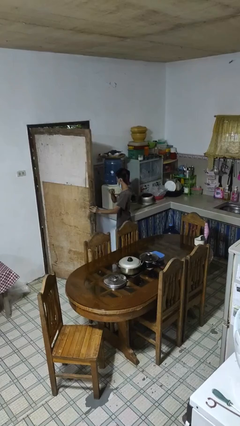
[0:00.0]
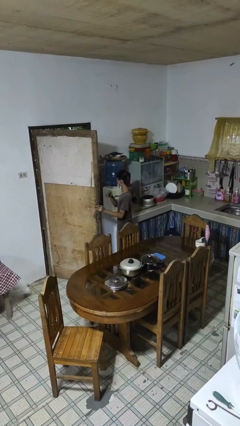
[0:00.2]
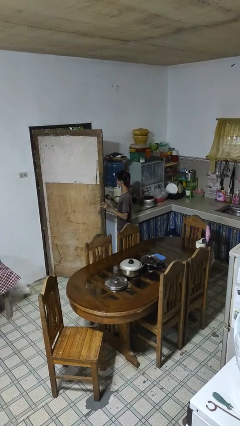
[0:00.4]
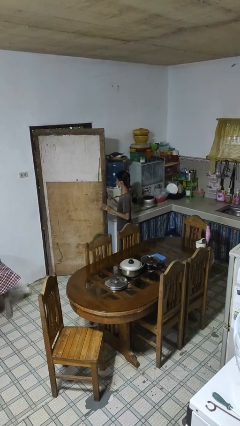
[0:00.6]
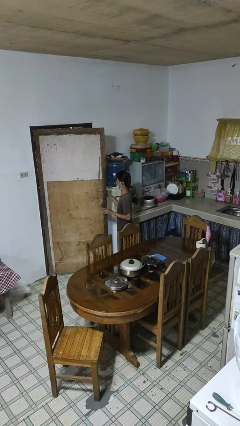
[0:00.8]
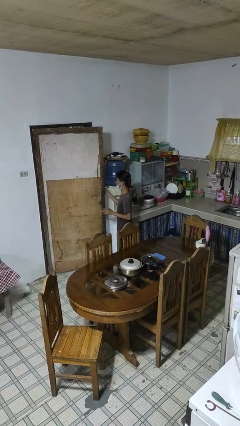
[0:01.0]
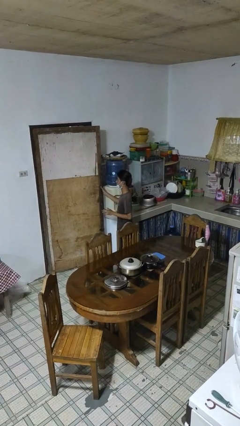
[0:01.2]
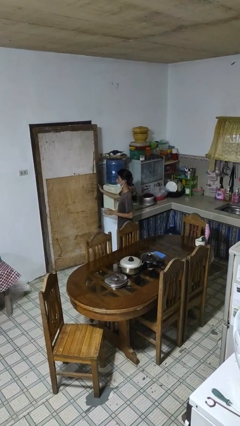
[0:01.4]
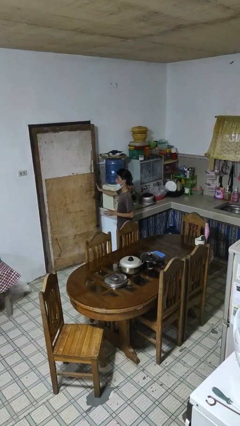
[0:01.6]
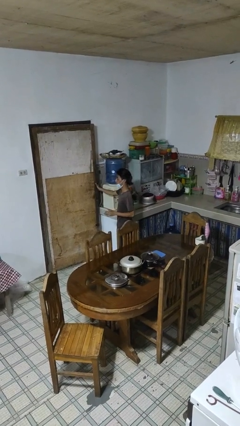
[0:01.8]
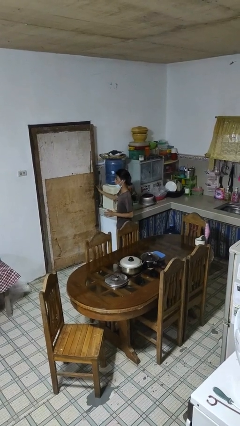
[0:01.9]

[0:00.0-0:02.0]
person closes facility door

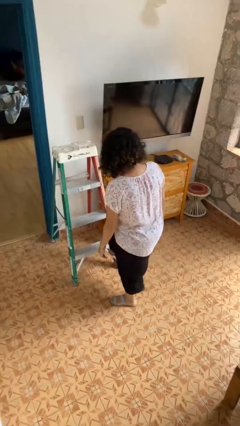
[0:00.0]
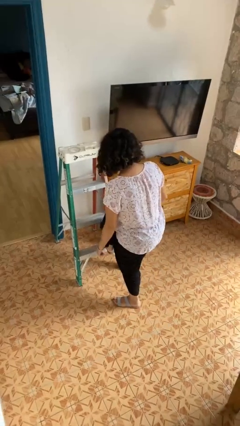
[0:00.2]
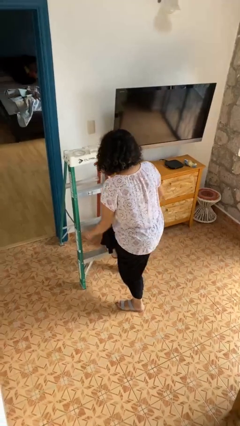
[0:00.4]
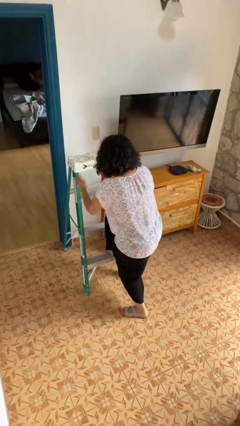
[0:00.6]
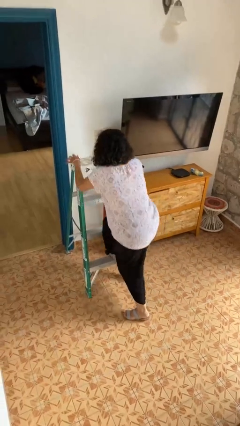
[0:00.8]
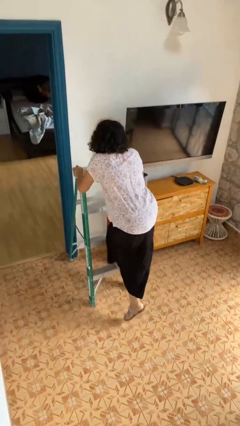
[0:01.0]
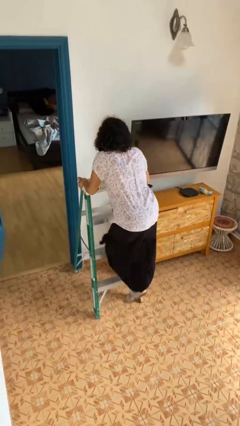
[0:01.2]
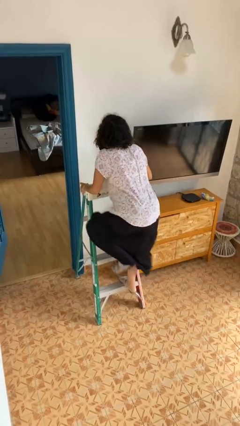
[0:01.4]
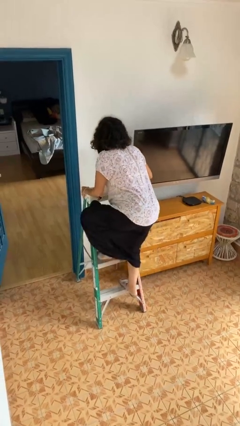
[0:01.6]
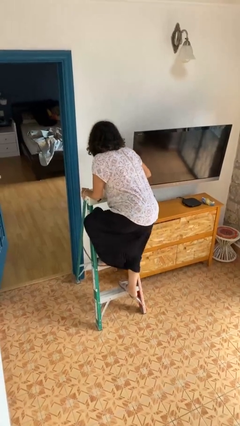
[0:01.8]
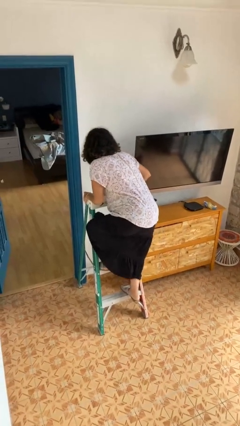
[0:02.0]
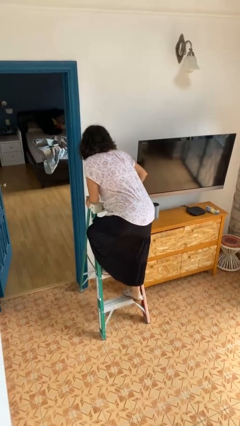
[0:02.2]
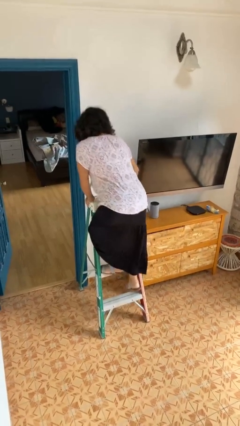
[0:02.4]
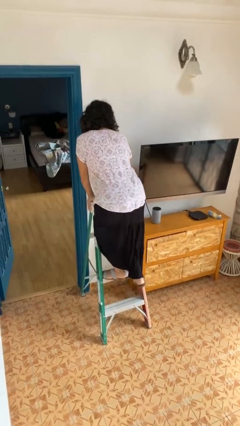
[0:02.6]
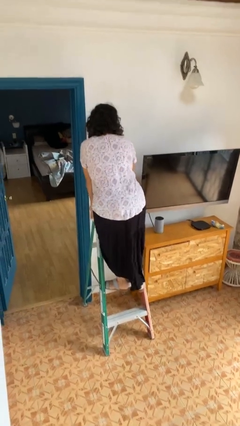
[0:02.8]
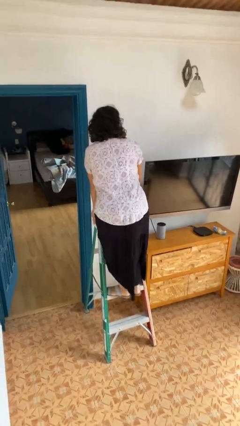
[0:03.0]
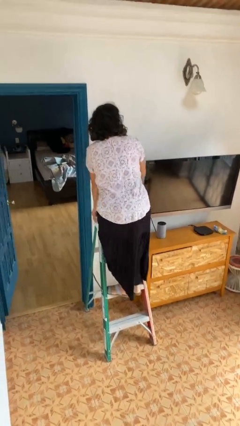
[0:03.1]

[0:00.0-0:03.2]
person climbs up ladder

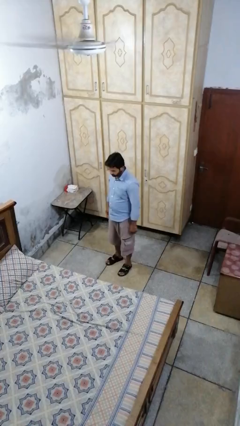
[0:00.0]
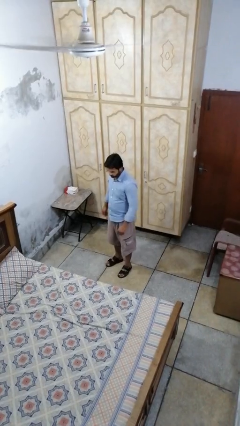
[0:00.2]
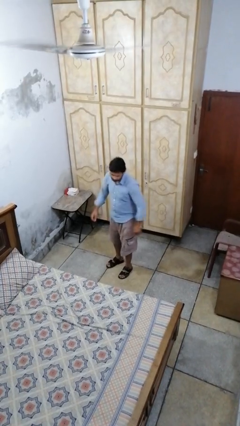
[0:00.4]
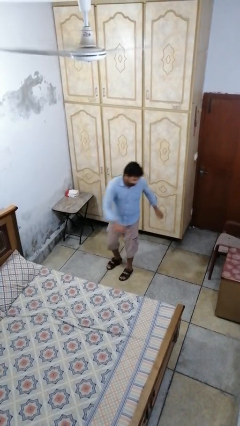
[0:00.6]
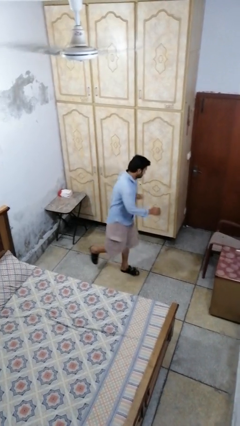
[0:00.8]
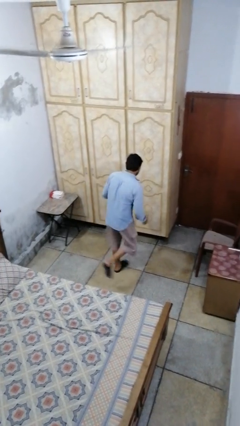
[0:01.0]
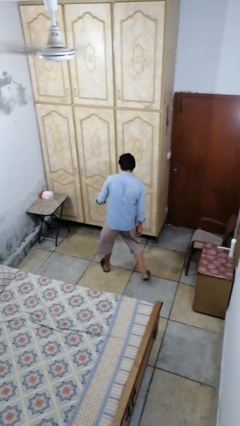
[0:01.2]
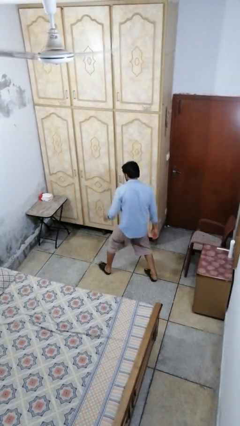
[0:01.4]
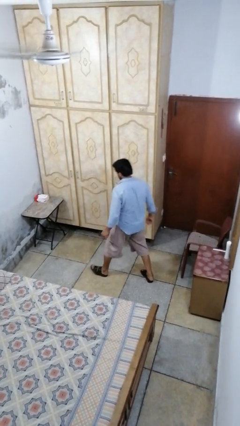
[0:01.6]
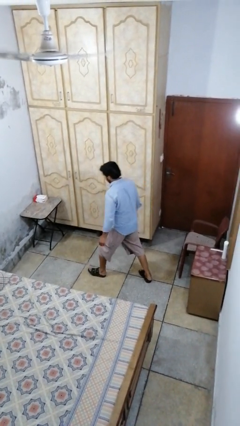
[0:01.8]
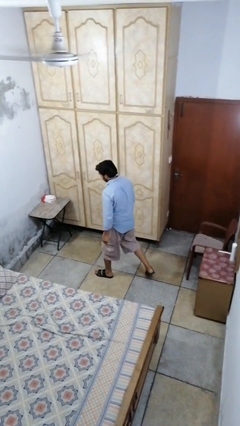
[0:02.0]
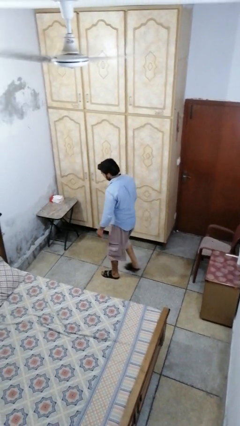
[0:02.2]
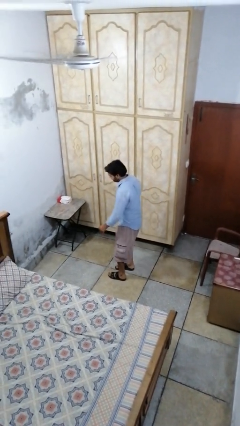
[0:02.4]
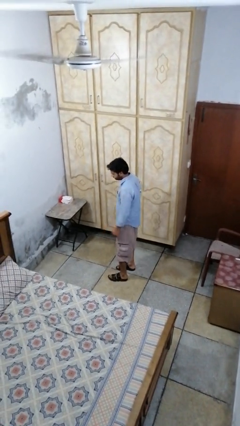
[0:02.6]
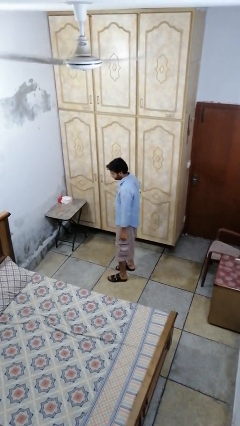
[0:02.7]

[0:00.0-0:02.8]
person twirls

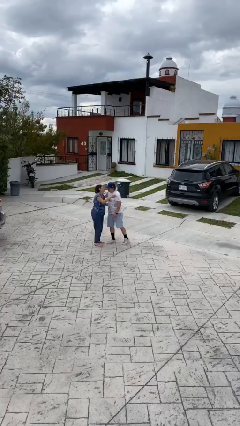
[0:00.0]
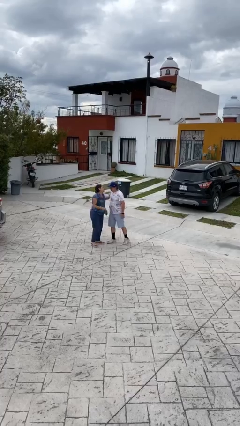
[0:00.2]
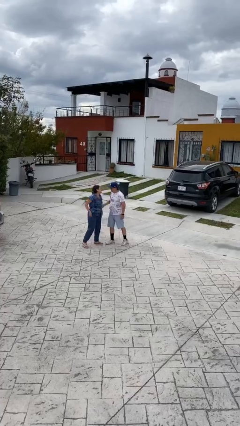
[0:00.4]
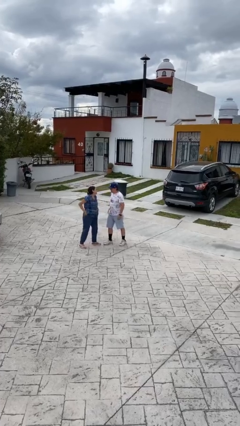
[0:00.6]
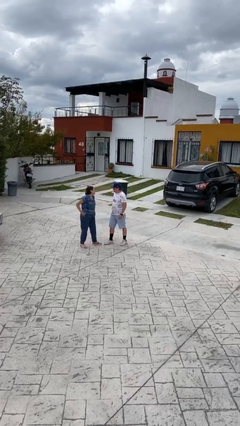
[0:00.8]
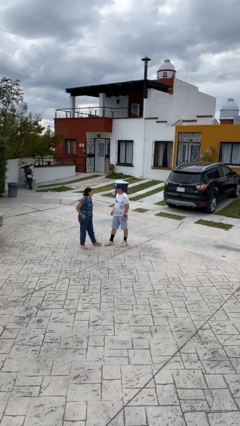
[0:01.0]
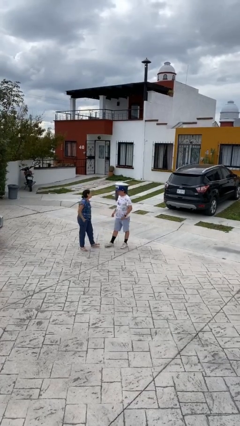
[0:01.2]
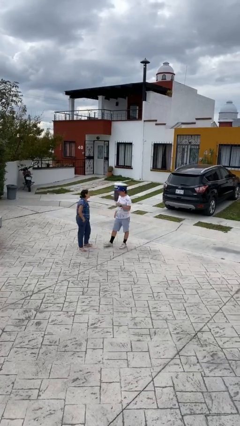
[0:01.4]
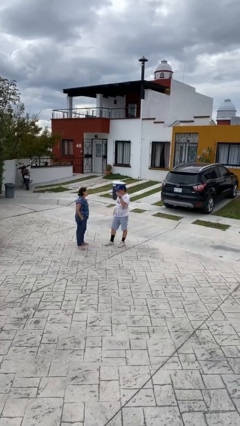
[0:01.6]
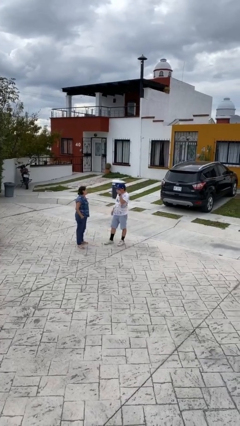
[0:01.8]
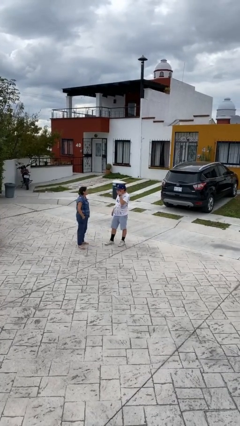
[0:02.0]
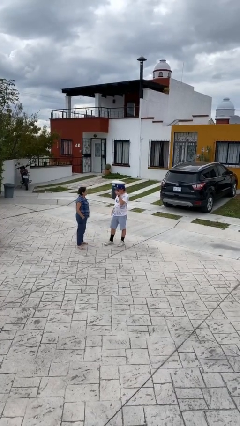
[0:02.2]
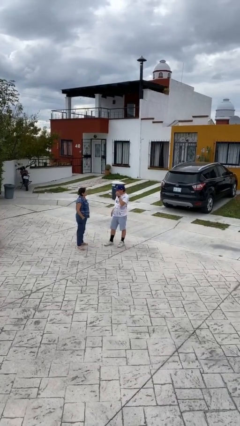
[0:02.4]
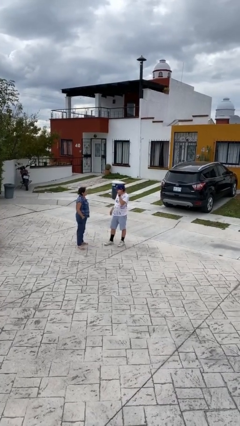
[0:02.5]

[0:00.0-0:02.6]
person talks to person

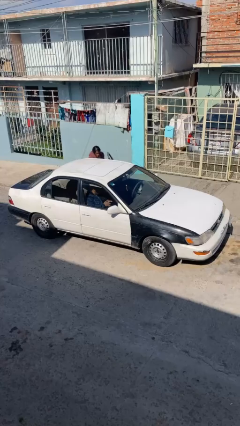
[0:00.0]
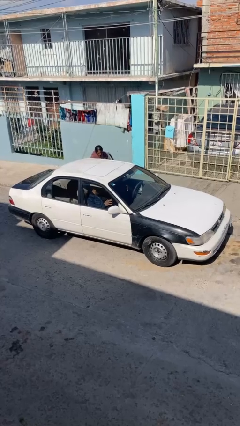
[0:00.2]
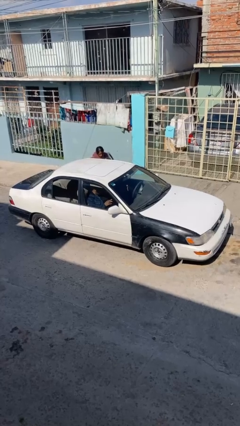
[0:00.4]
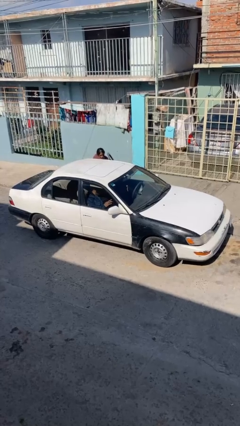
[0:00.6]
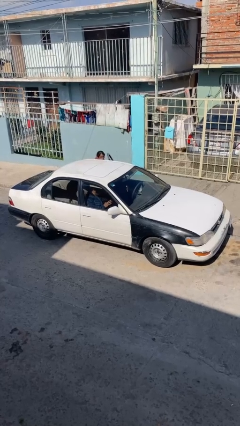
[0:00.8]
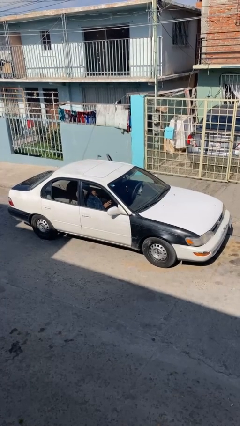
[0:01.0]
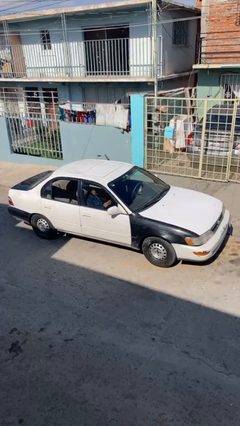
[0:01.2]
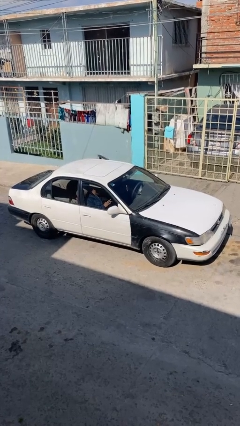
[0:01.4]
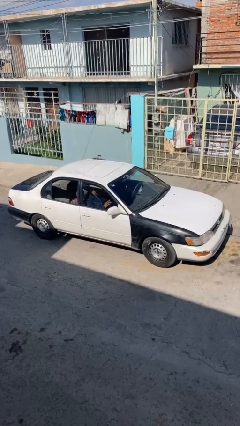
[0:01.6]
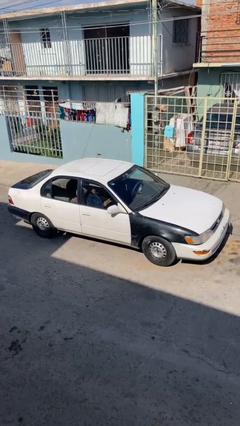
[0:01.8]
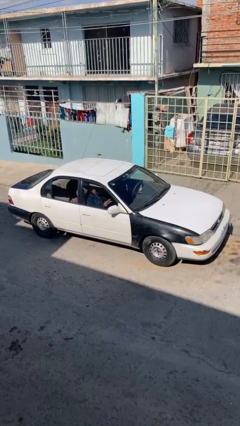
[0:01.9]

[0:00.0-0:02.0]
car picks up person

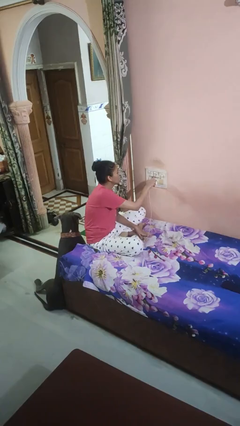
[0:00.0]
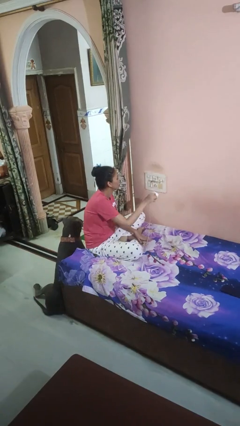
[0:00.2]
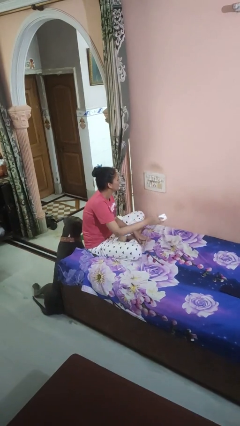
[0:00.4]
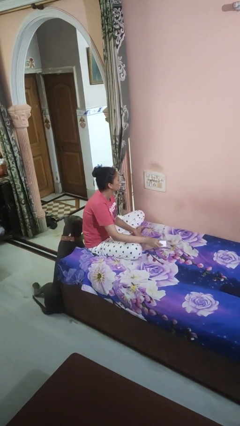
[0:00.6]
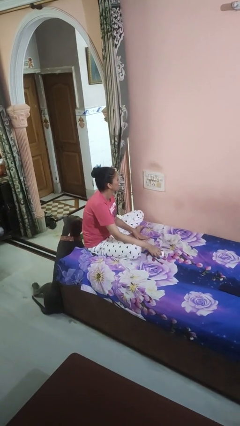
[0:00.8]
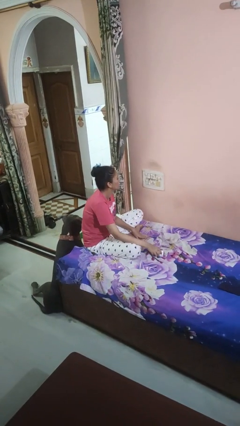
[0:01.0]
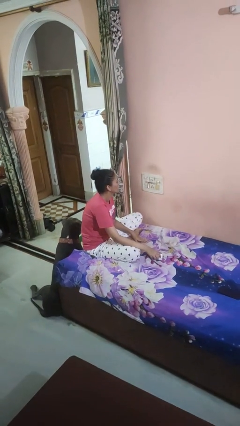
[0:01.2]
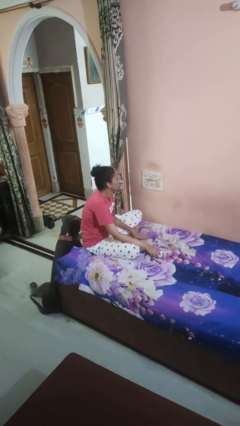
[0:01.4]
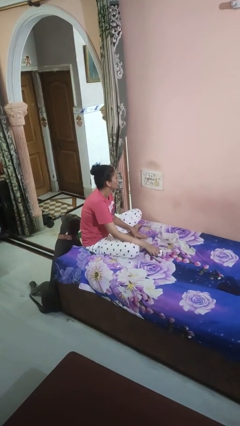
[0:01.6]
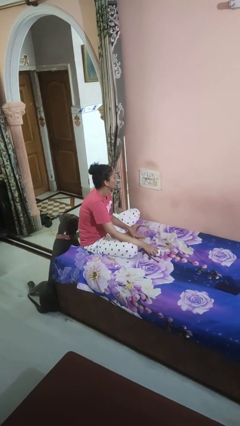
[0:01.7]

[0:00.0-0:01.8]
person unplugs from electrical socket

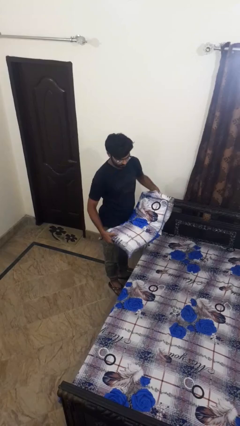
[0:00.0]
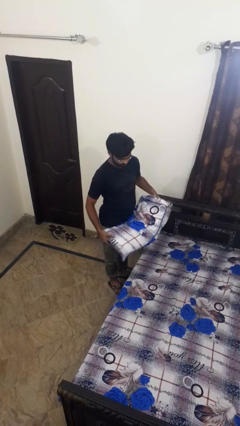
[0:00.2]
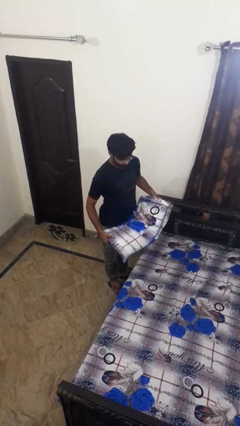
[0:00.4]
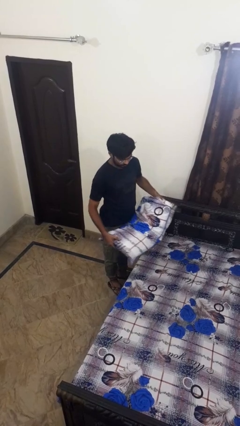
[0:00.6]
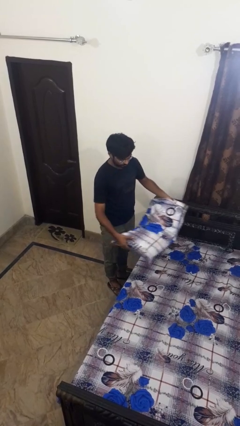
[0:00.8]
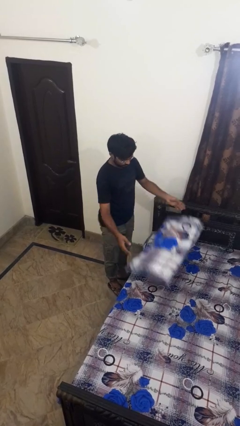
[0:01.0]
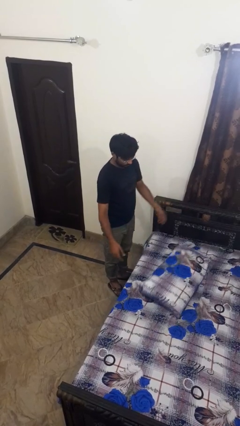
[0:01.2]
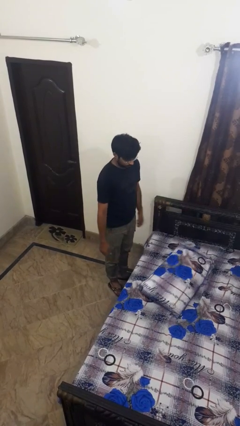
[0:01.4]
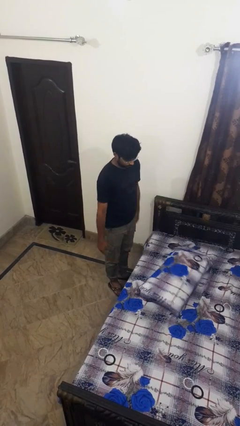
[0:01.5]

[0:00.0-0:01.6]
person puts down object on bed

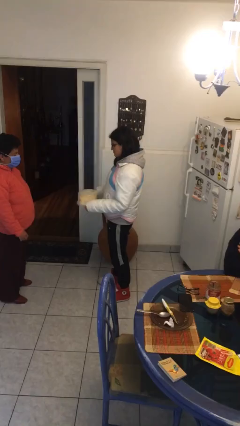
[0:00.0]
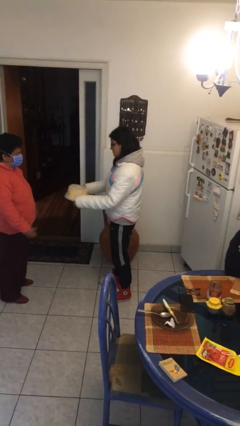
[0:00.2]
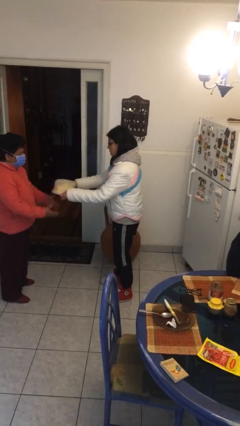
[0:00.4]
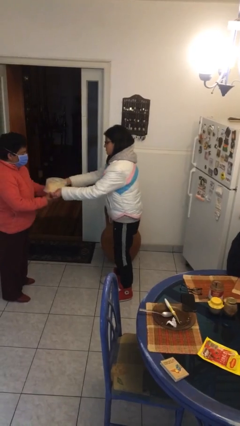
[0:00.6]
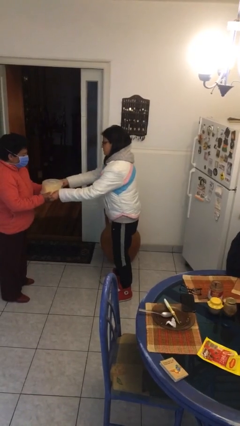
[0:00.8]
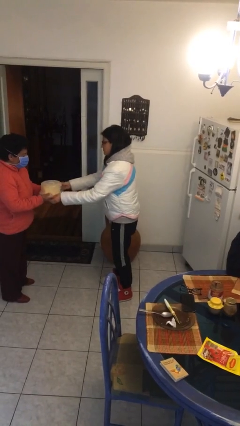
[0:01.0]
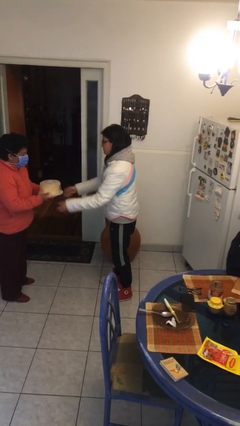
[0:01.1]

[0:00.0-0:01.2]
person transfers object to person
